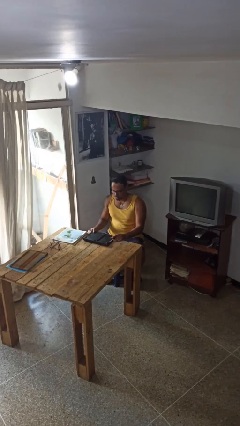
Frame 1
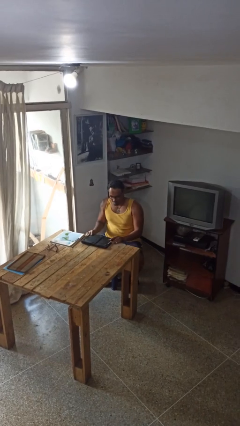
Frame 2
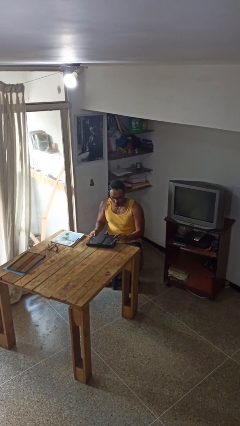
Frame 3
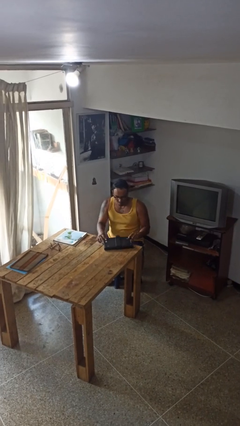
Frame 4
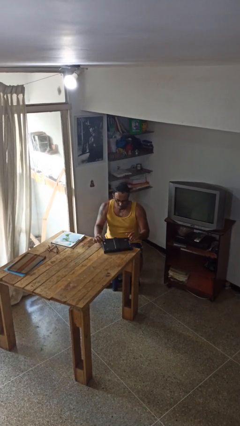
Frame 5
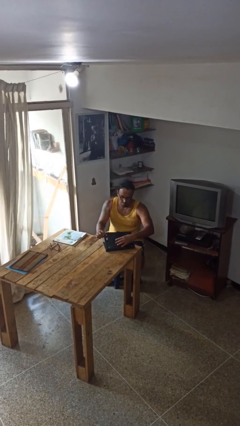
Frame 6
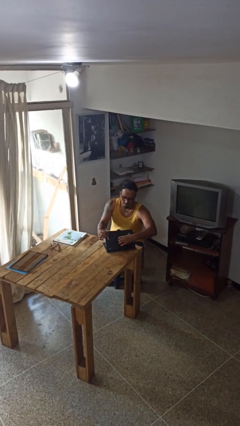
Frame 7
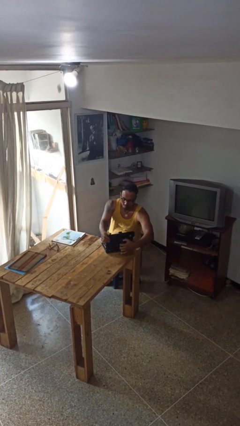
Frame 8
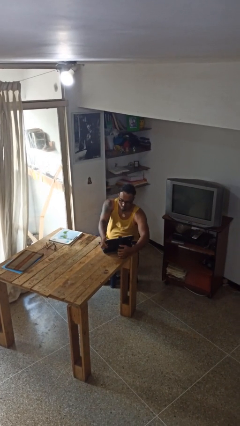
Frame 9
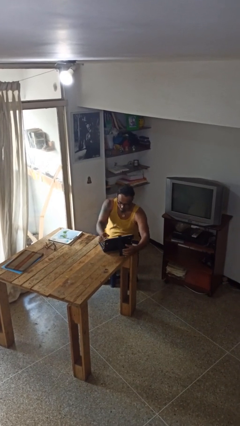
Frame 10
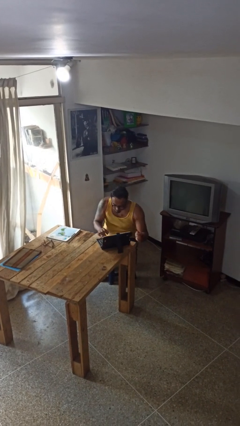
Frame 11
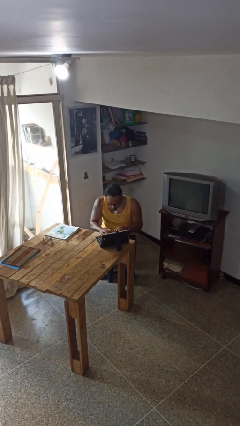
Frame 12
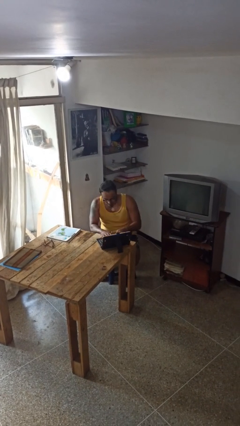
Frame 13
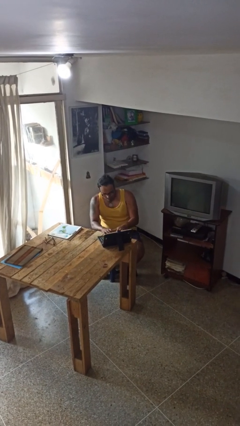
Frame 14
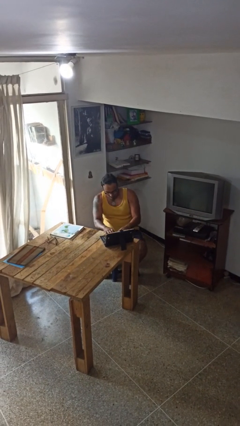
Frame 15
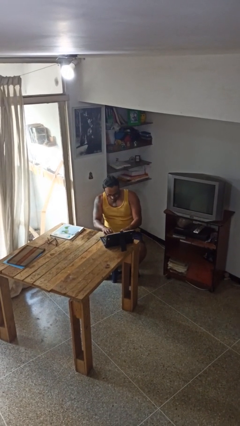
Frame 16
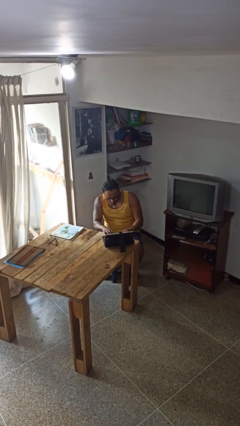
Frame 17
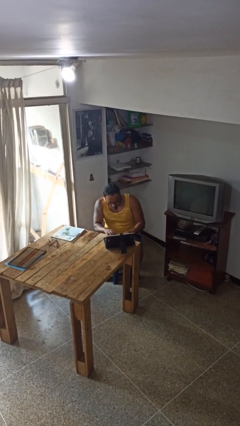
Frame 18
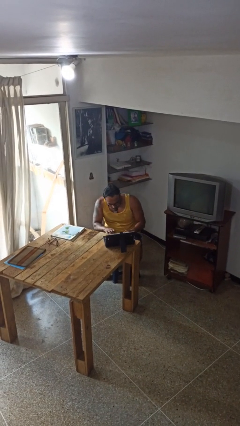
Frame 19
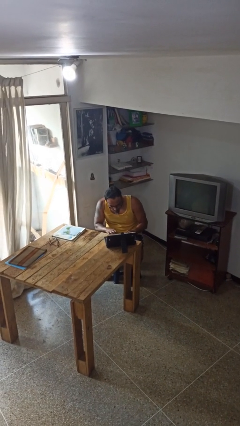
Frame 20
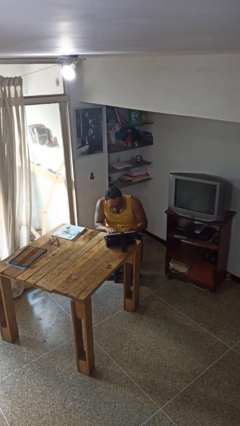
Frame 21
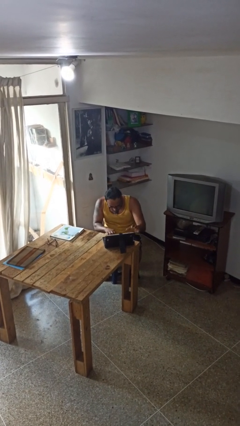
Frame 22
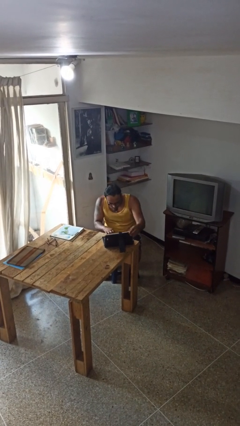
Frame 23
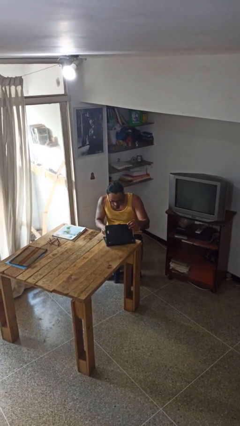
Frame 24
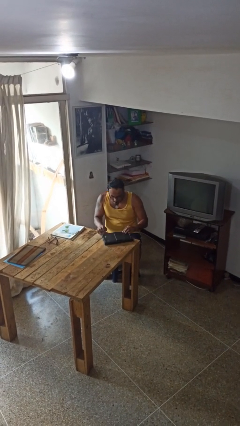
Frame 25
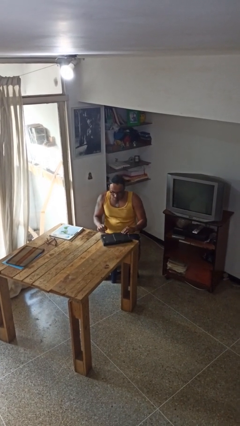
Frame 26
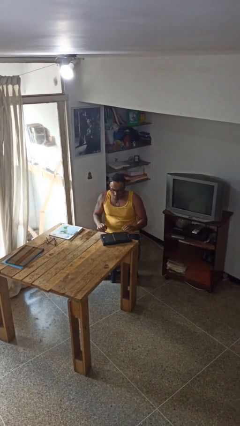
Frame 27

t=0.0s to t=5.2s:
person interacts with laptop

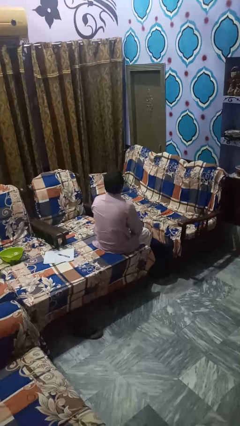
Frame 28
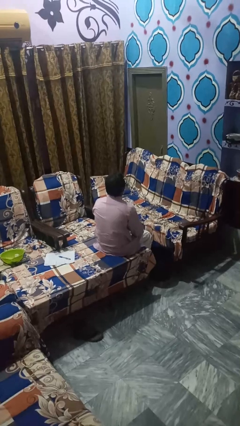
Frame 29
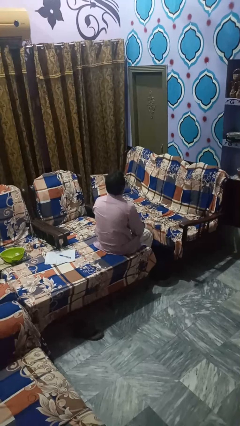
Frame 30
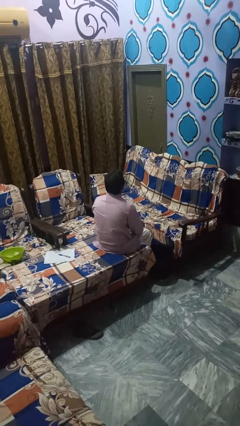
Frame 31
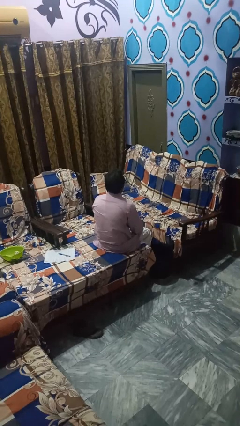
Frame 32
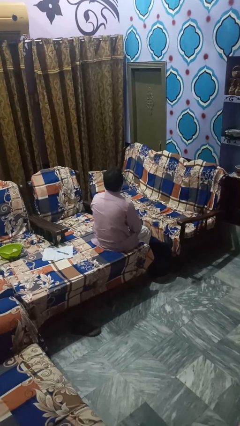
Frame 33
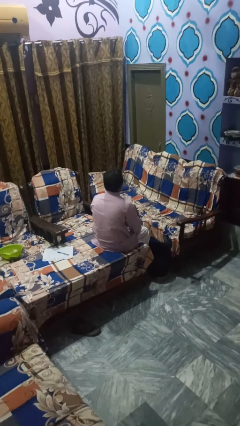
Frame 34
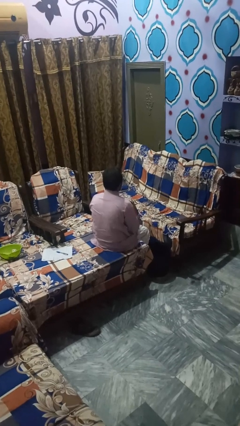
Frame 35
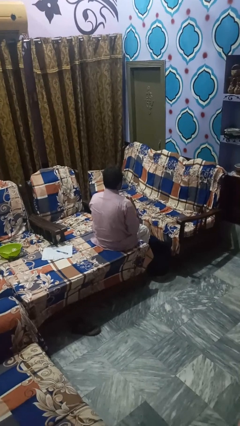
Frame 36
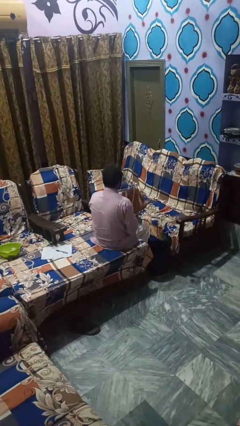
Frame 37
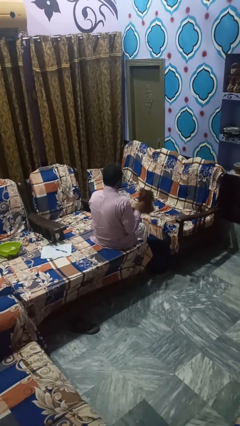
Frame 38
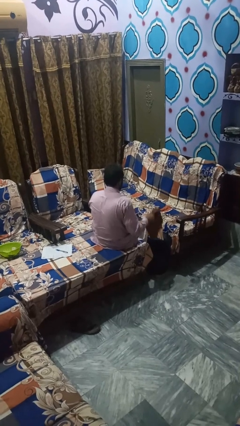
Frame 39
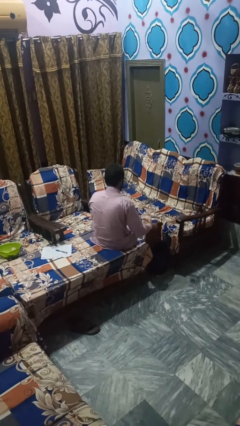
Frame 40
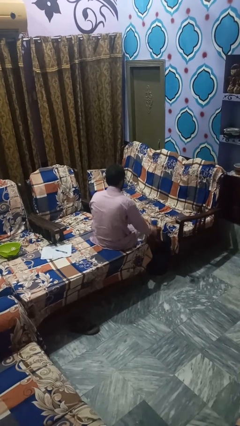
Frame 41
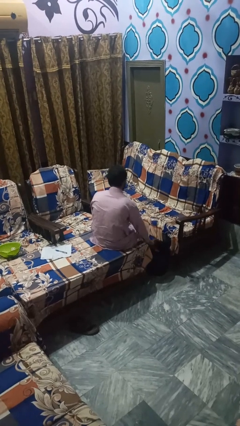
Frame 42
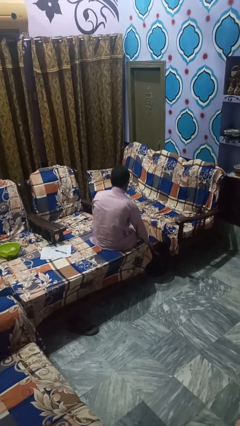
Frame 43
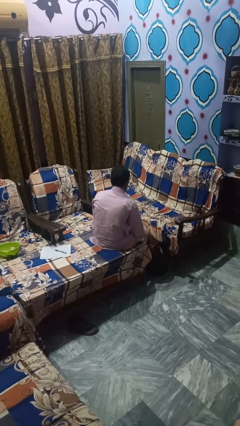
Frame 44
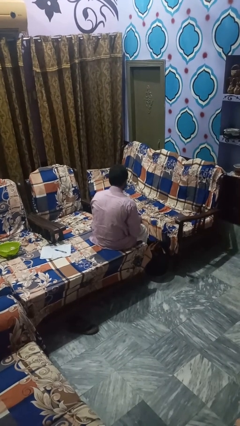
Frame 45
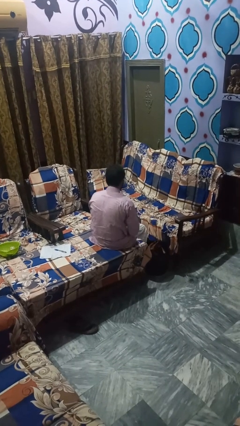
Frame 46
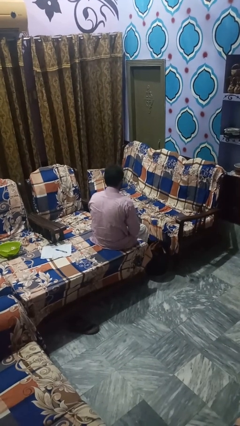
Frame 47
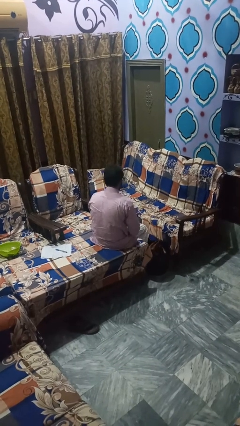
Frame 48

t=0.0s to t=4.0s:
person puts object into basket

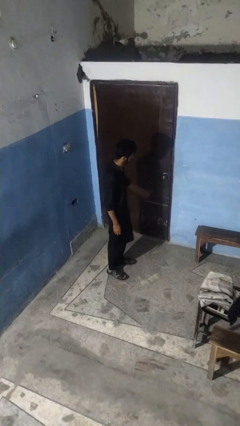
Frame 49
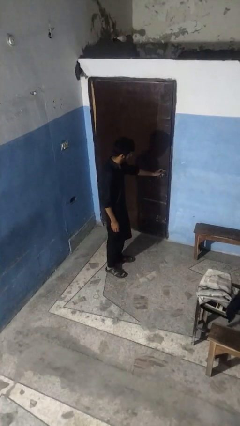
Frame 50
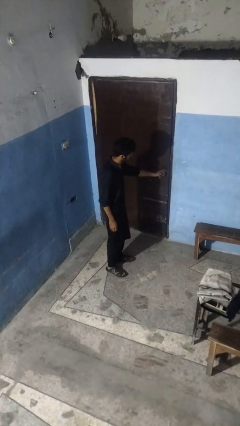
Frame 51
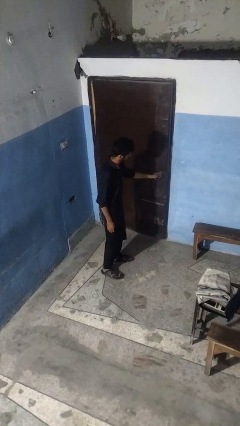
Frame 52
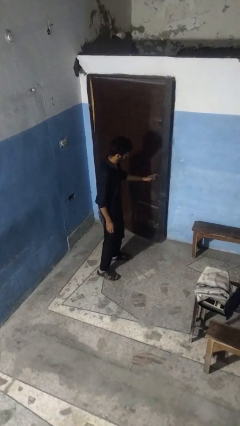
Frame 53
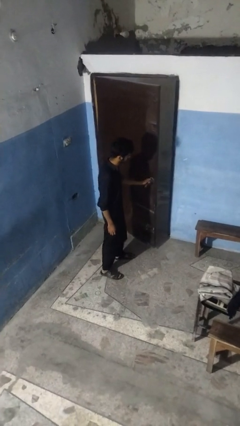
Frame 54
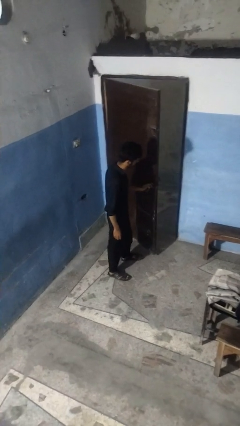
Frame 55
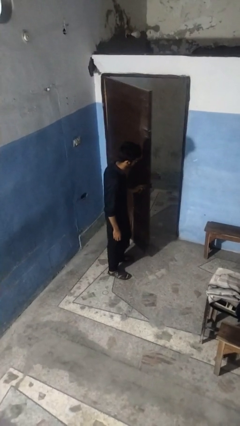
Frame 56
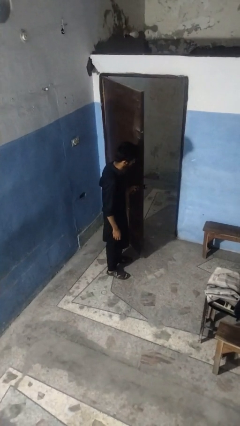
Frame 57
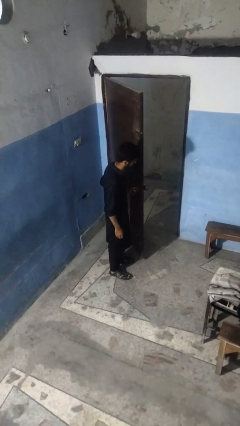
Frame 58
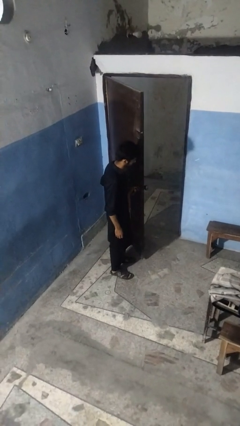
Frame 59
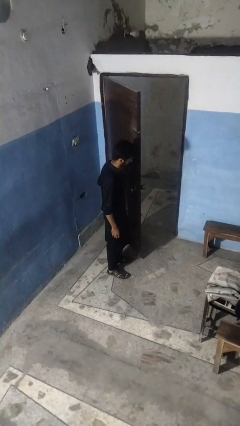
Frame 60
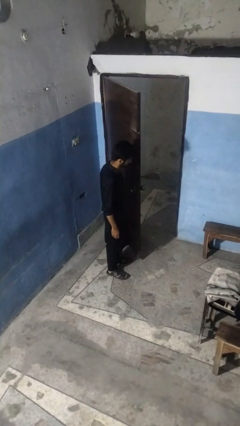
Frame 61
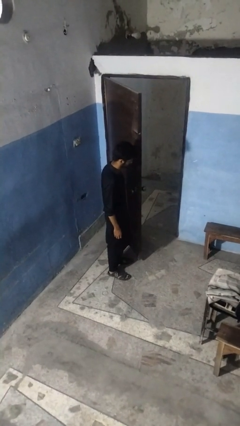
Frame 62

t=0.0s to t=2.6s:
person opens facility door

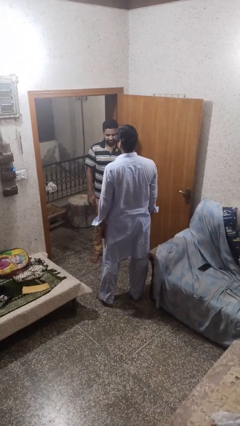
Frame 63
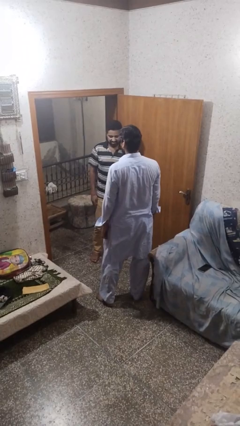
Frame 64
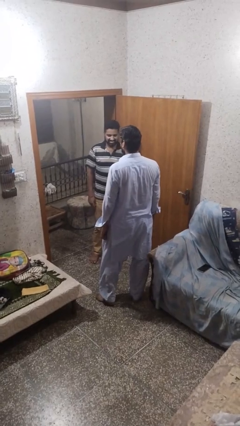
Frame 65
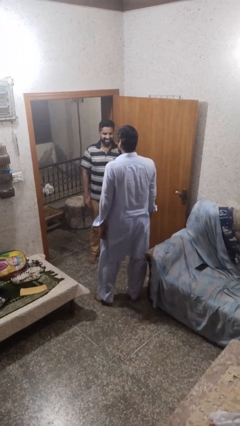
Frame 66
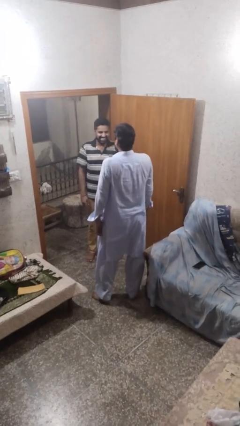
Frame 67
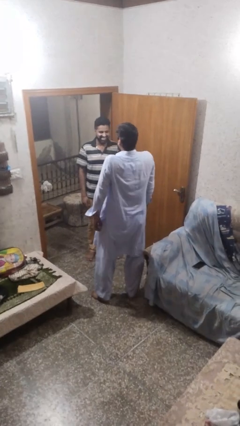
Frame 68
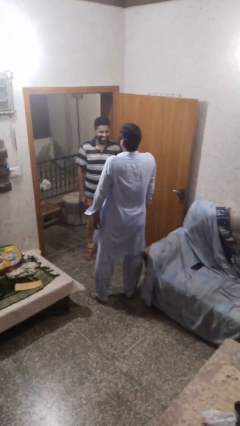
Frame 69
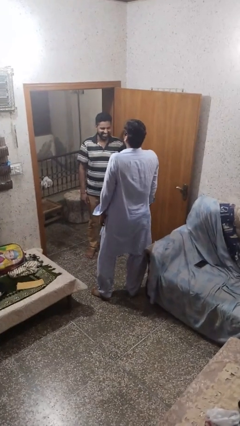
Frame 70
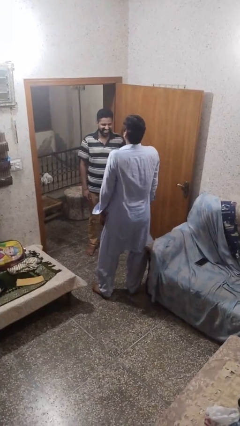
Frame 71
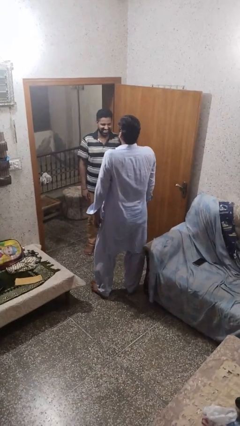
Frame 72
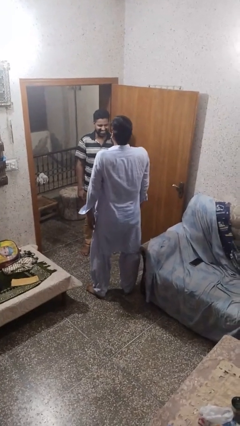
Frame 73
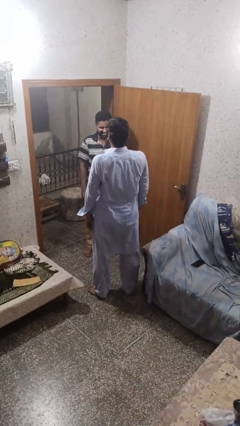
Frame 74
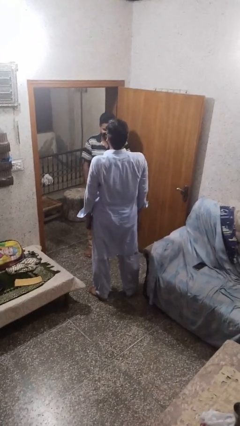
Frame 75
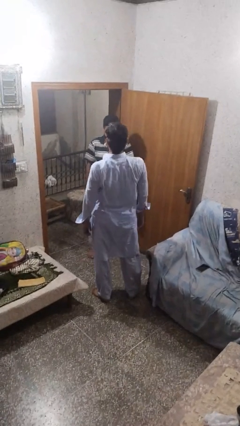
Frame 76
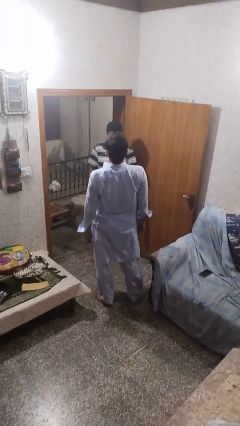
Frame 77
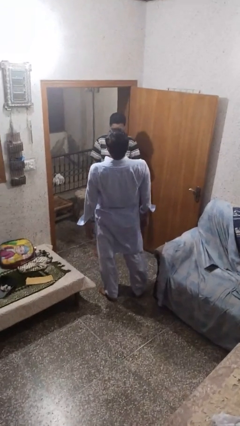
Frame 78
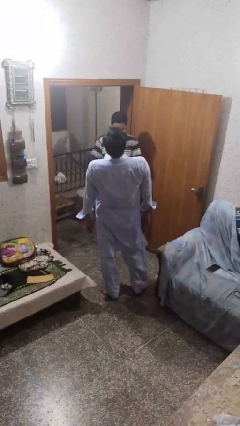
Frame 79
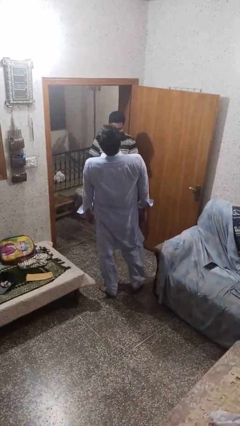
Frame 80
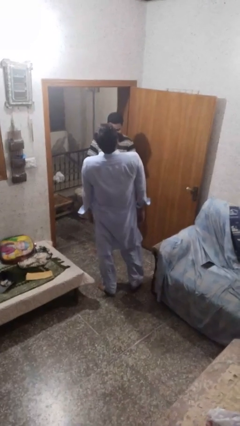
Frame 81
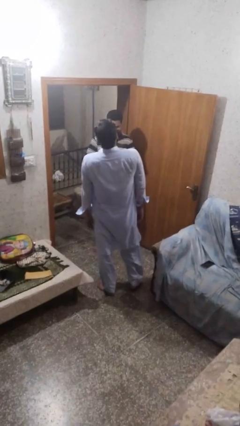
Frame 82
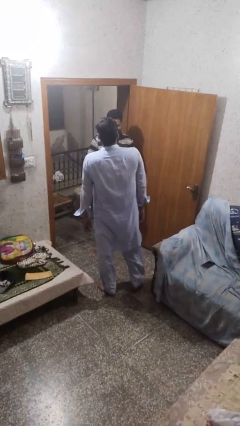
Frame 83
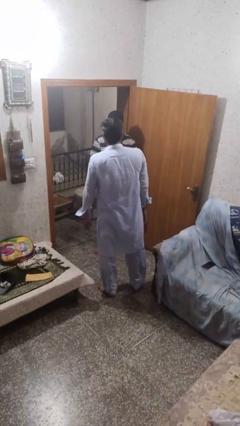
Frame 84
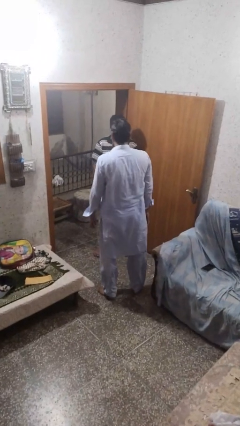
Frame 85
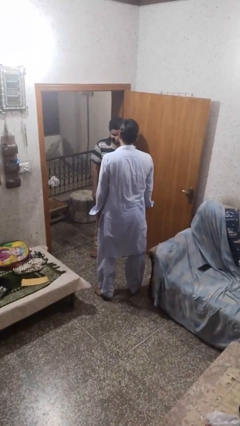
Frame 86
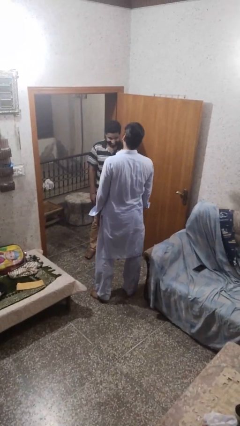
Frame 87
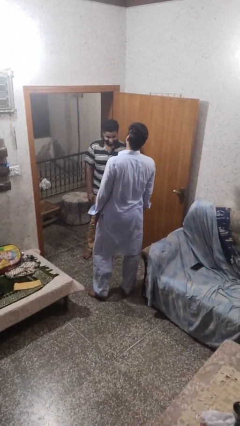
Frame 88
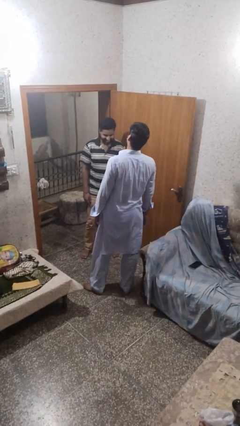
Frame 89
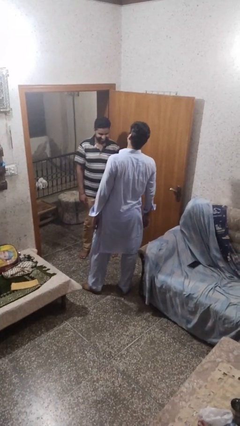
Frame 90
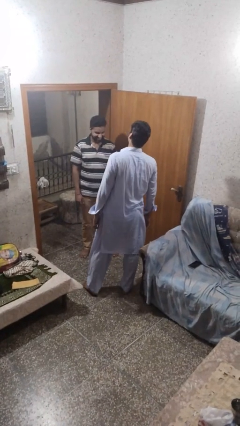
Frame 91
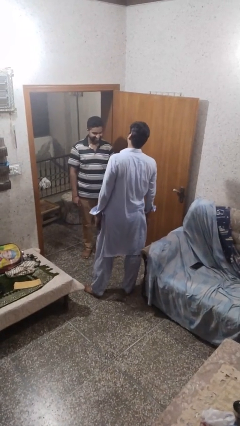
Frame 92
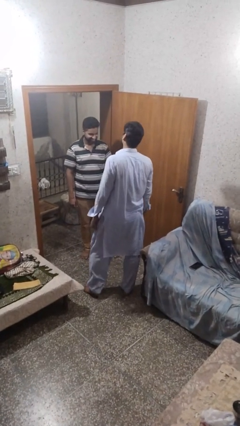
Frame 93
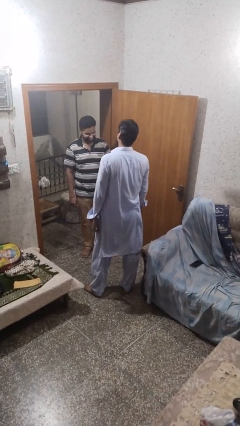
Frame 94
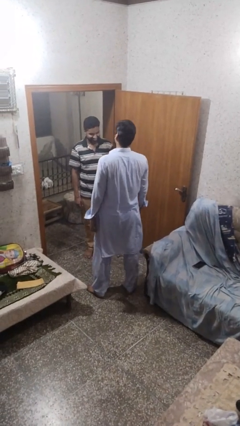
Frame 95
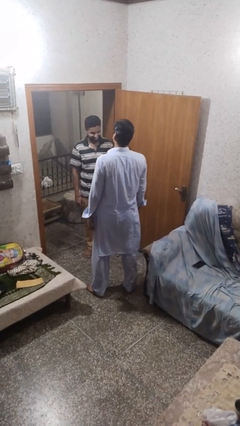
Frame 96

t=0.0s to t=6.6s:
person laughs with person
